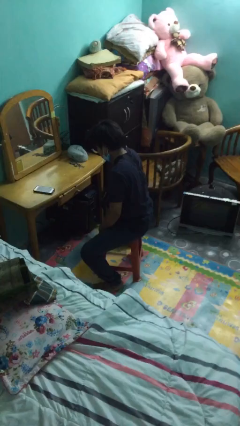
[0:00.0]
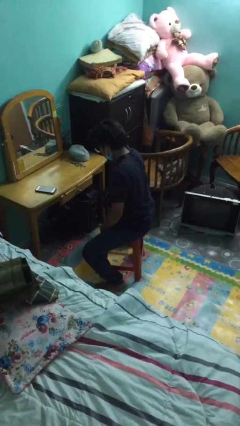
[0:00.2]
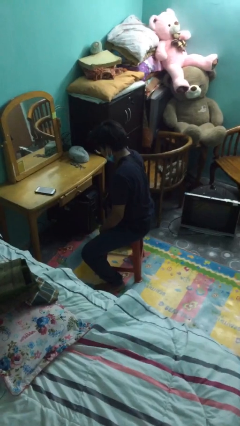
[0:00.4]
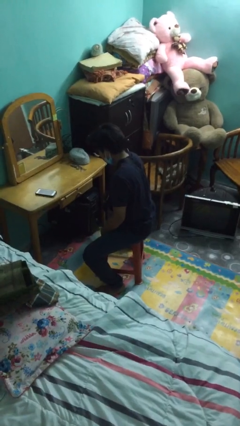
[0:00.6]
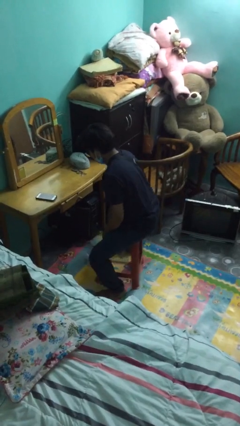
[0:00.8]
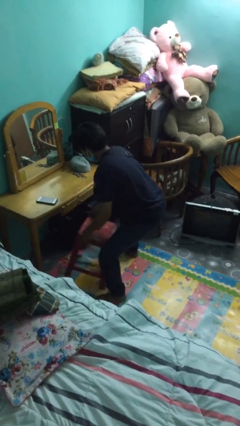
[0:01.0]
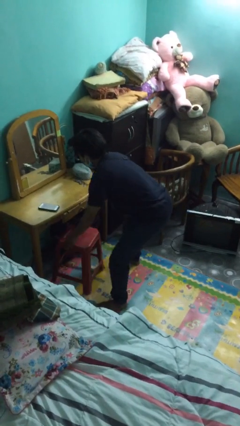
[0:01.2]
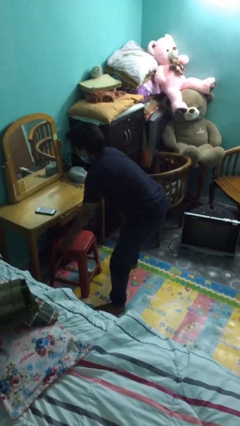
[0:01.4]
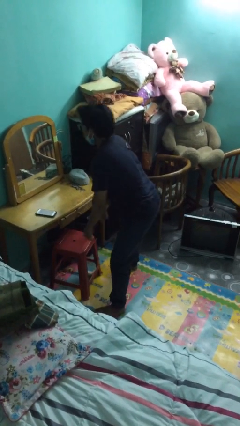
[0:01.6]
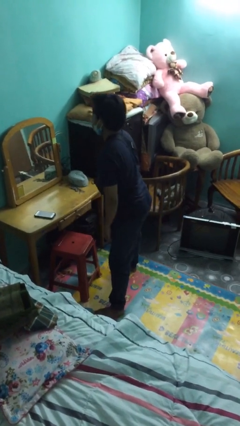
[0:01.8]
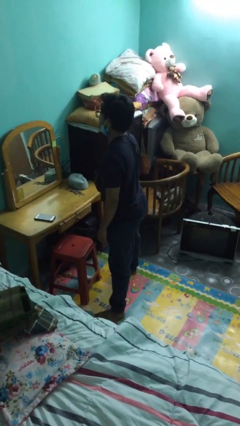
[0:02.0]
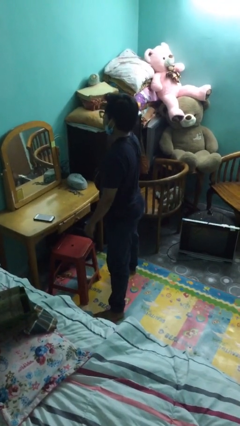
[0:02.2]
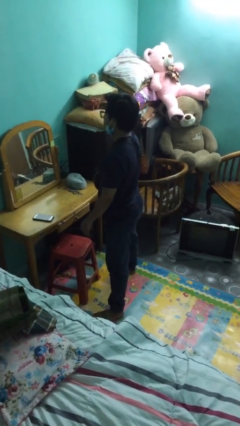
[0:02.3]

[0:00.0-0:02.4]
person stands up

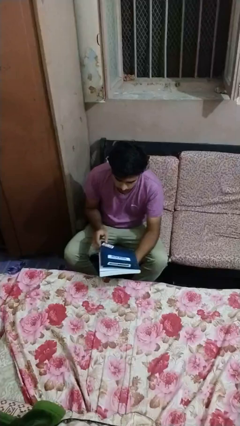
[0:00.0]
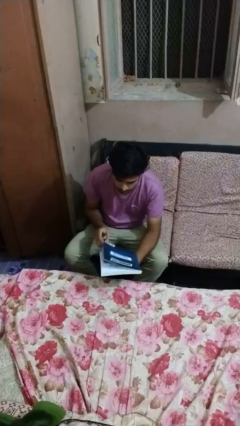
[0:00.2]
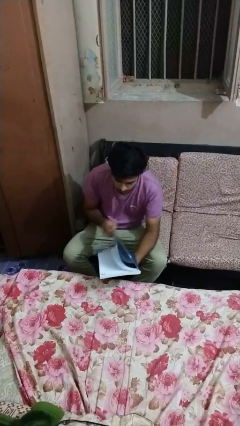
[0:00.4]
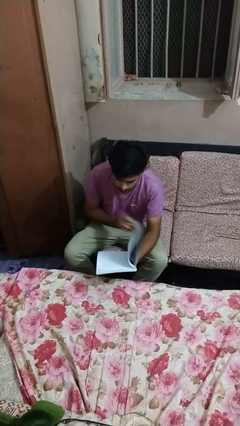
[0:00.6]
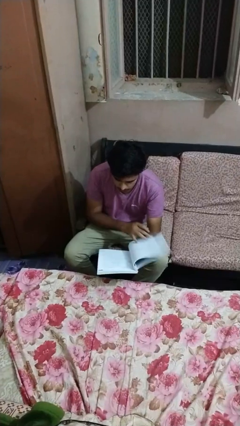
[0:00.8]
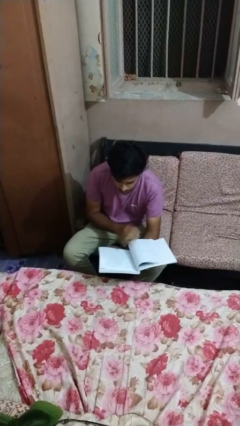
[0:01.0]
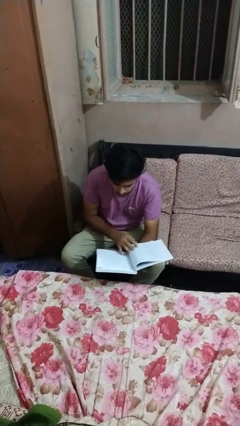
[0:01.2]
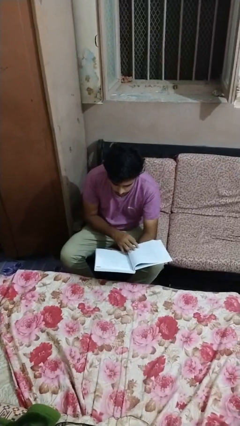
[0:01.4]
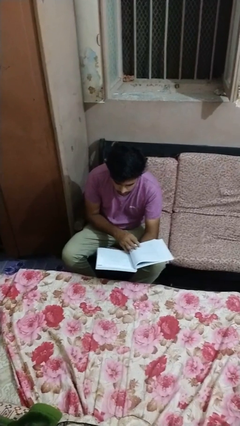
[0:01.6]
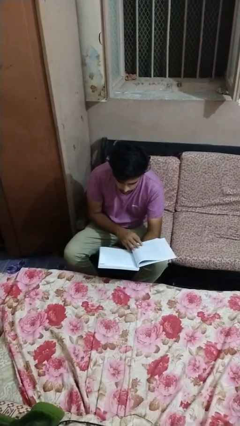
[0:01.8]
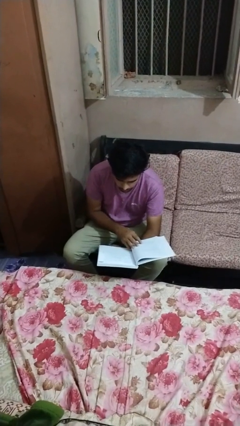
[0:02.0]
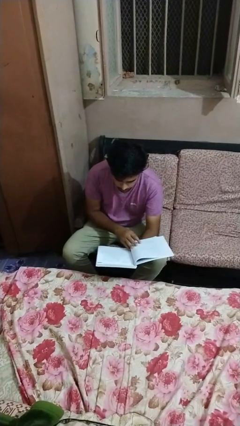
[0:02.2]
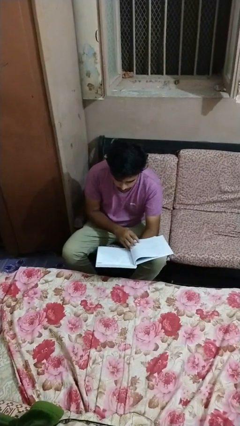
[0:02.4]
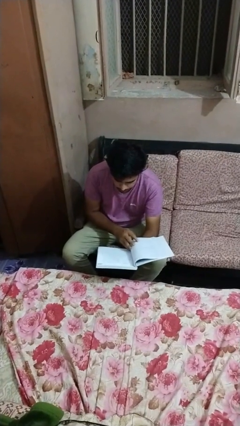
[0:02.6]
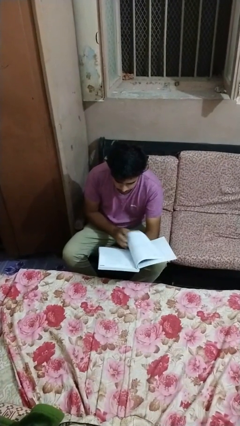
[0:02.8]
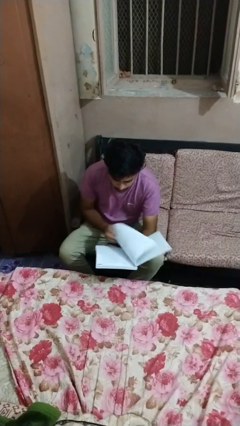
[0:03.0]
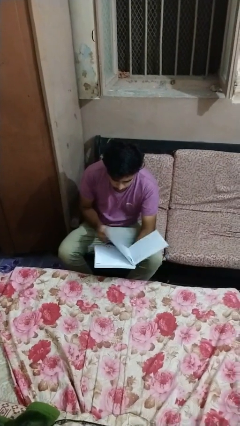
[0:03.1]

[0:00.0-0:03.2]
person reads newspaper

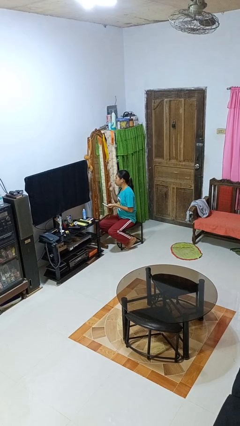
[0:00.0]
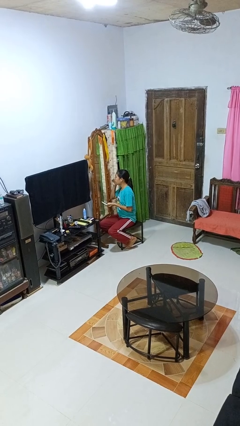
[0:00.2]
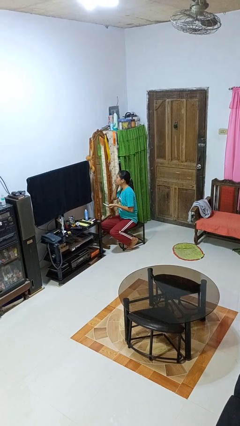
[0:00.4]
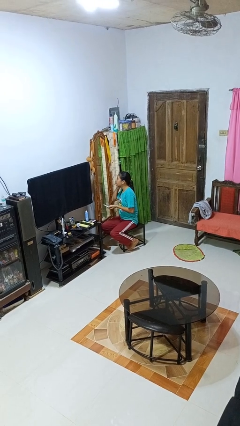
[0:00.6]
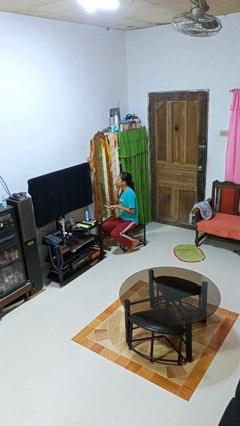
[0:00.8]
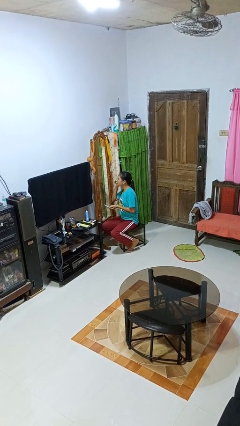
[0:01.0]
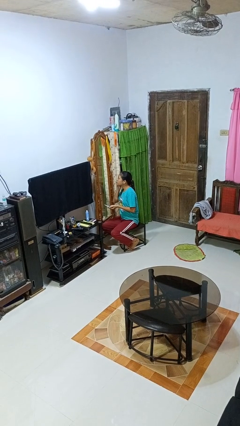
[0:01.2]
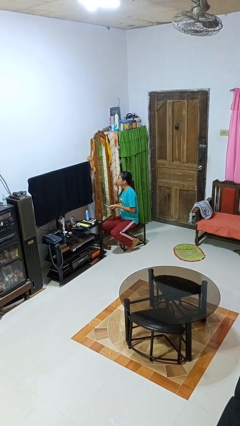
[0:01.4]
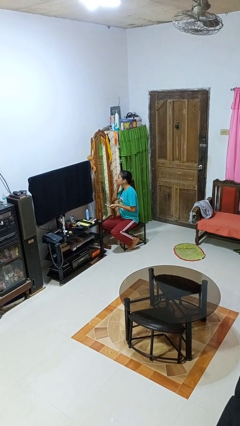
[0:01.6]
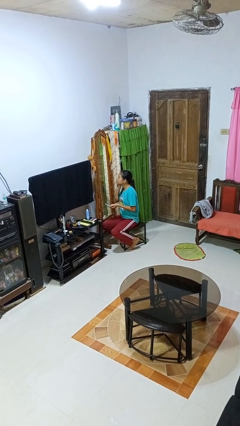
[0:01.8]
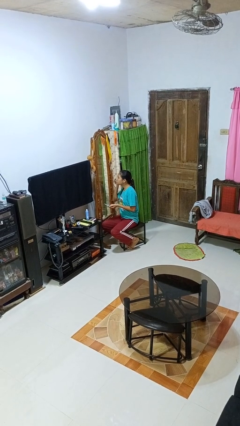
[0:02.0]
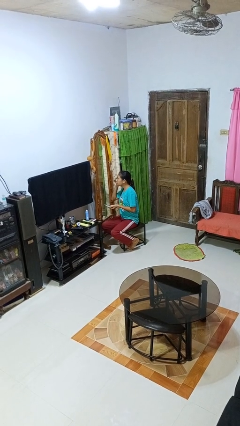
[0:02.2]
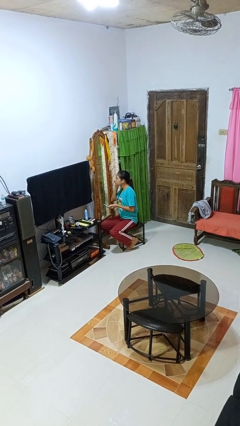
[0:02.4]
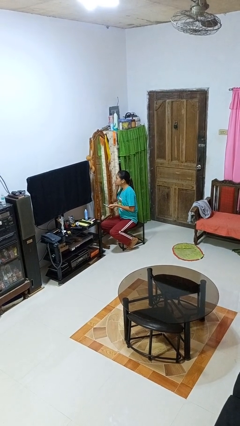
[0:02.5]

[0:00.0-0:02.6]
person applies foundation makeup

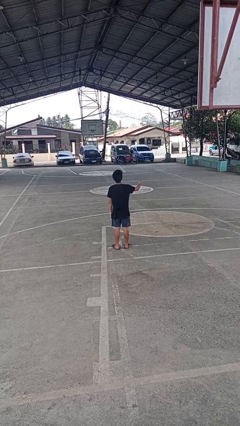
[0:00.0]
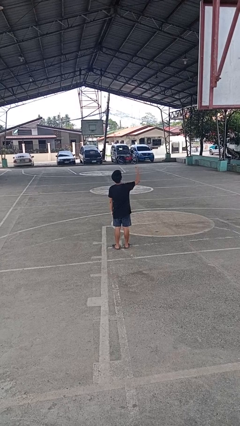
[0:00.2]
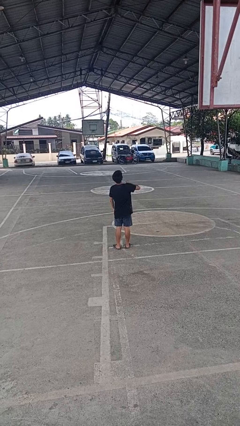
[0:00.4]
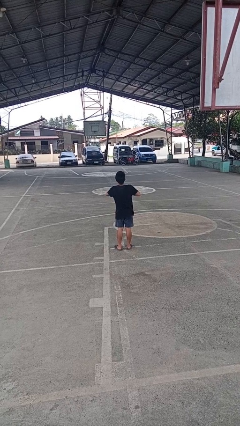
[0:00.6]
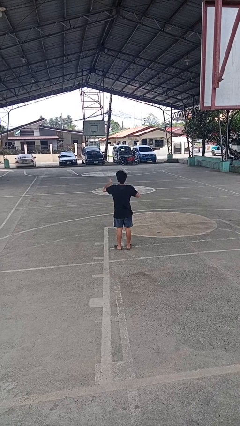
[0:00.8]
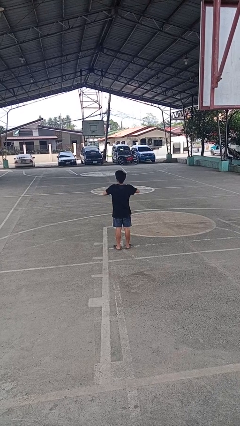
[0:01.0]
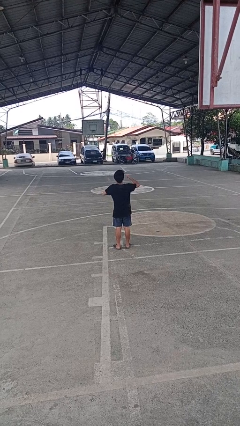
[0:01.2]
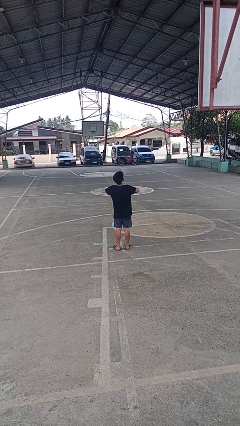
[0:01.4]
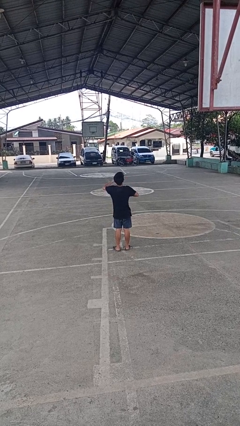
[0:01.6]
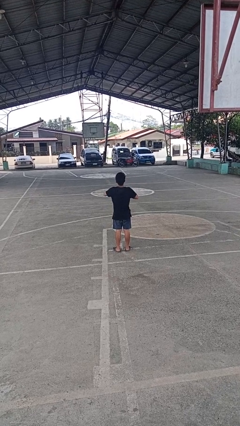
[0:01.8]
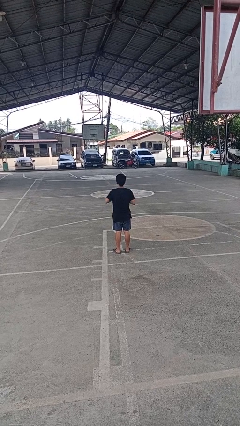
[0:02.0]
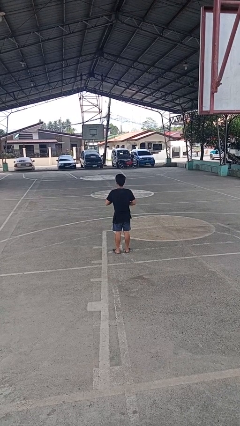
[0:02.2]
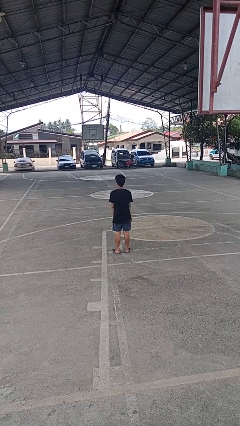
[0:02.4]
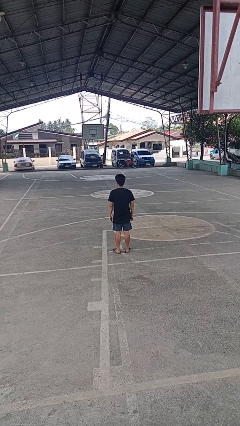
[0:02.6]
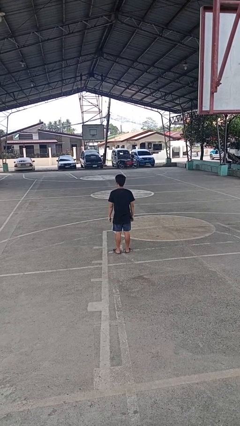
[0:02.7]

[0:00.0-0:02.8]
person drums on chest

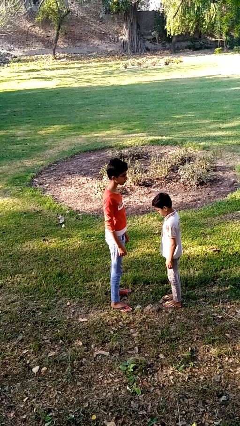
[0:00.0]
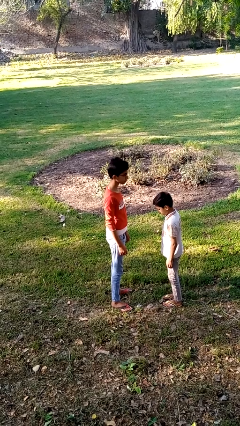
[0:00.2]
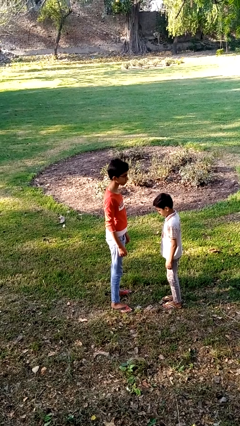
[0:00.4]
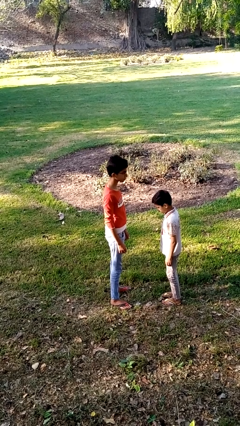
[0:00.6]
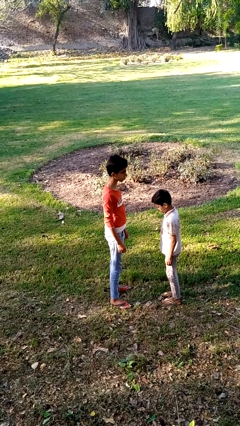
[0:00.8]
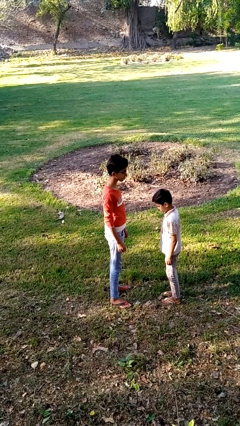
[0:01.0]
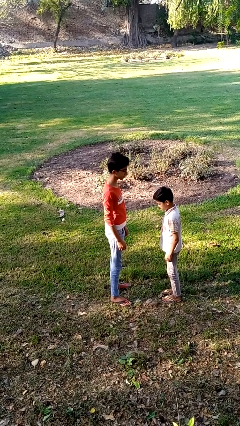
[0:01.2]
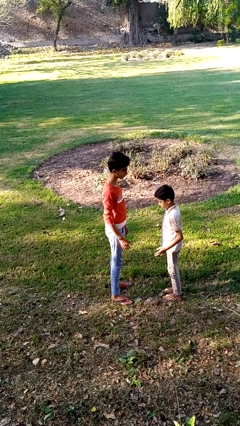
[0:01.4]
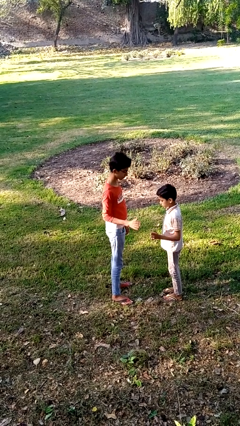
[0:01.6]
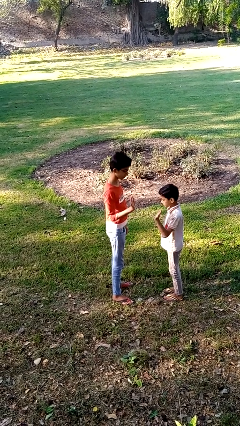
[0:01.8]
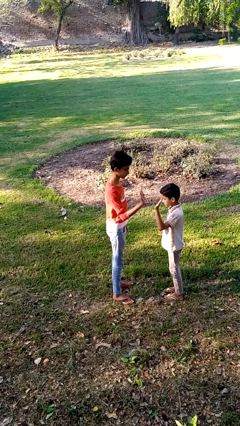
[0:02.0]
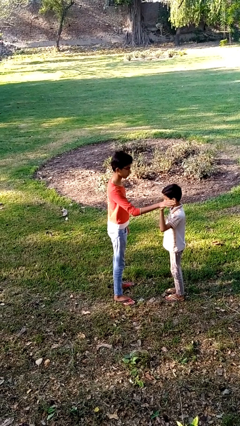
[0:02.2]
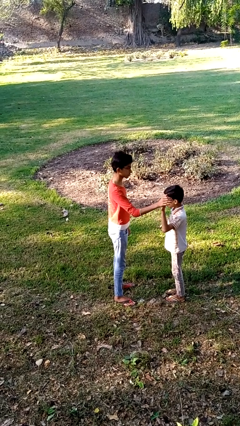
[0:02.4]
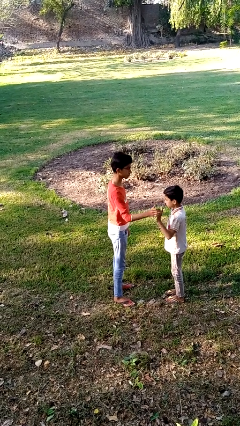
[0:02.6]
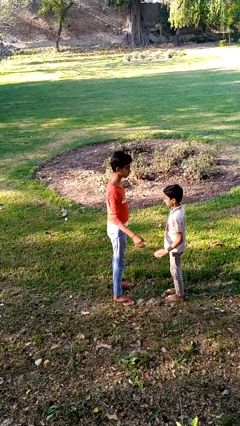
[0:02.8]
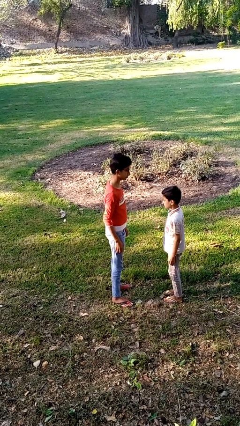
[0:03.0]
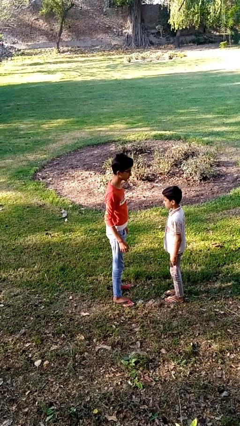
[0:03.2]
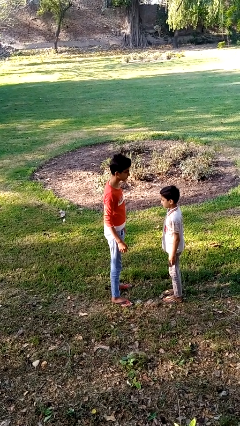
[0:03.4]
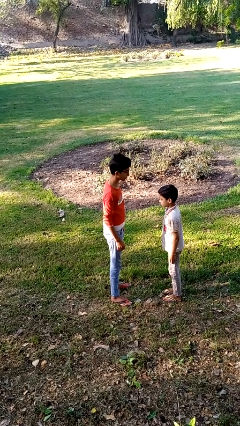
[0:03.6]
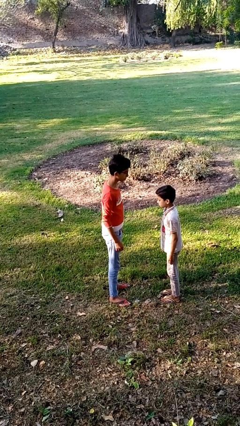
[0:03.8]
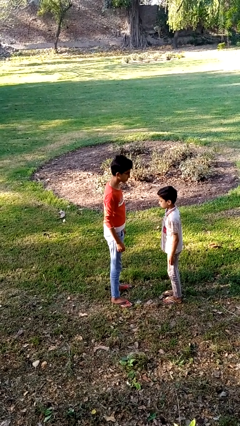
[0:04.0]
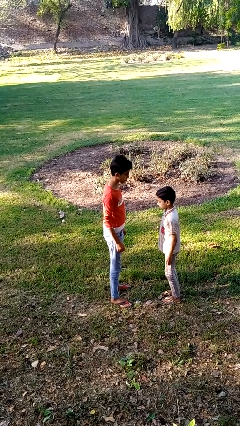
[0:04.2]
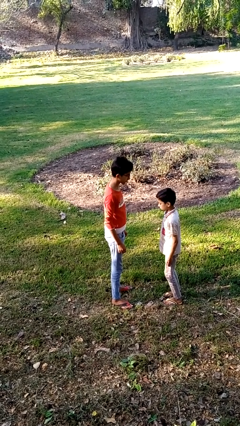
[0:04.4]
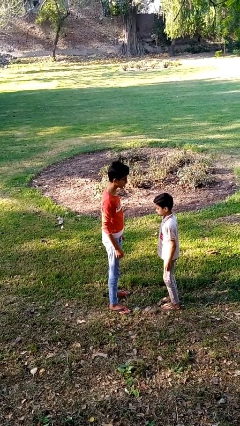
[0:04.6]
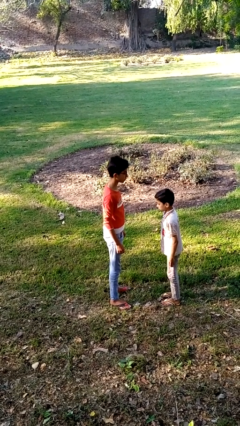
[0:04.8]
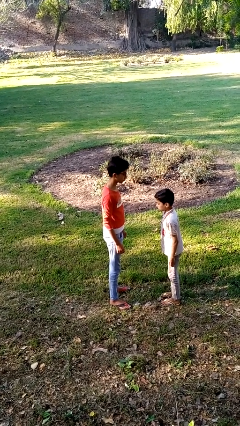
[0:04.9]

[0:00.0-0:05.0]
person highfives hand

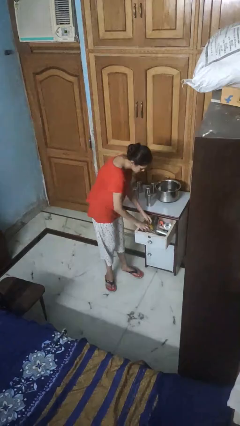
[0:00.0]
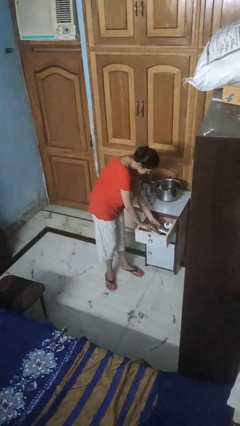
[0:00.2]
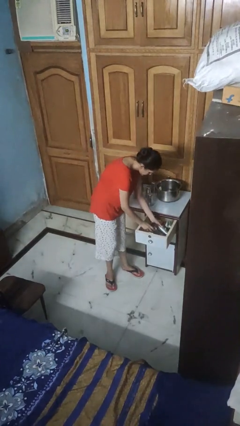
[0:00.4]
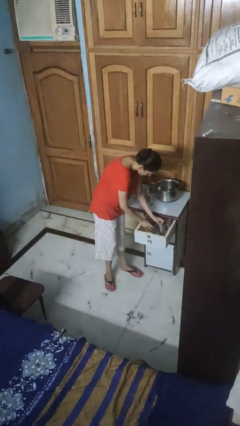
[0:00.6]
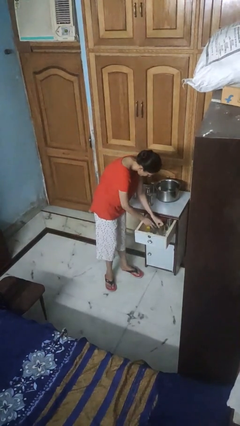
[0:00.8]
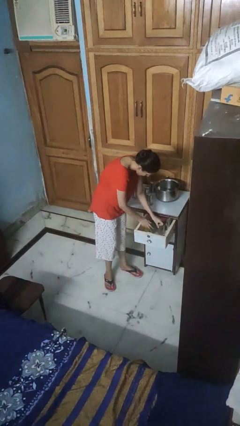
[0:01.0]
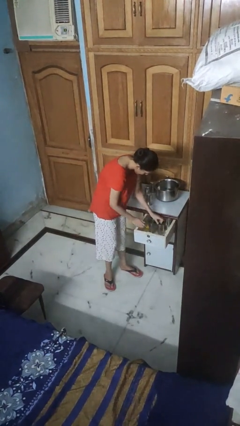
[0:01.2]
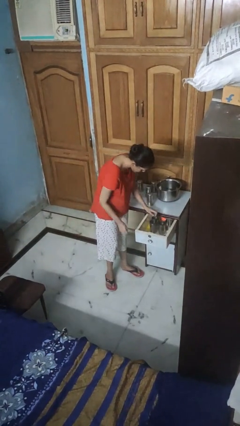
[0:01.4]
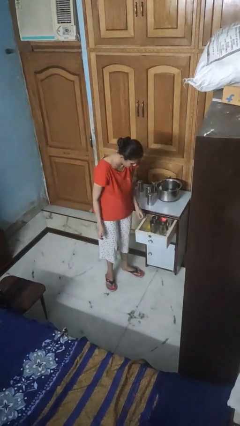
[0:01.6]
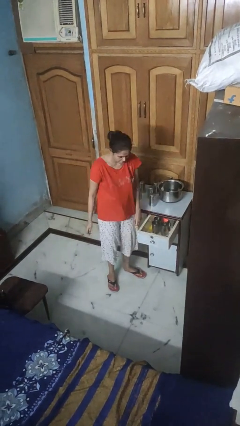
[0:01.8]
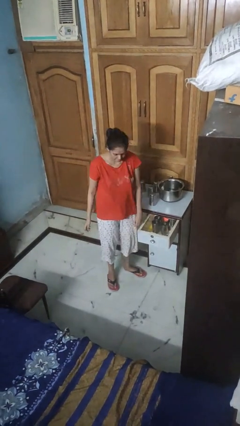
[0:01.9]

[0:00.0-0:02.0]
person searches in kitchen drawer
